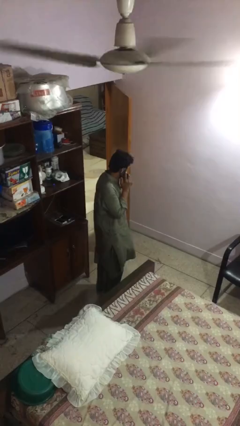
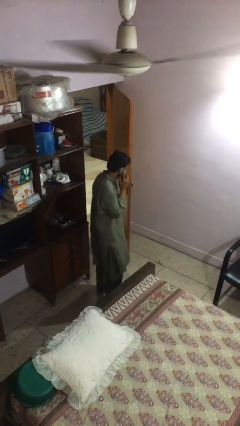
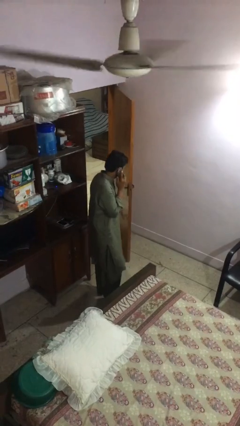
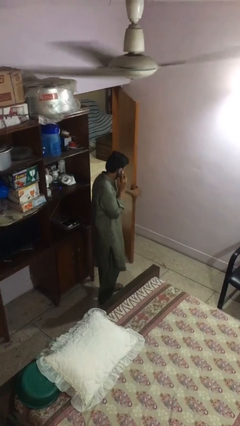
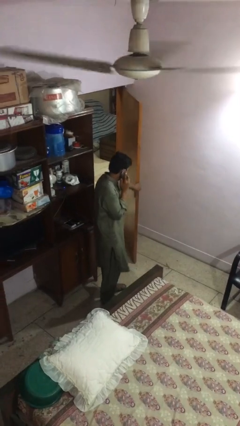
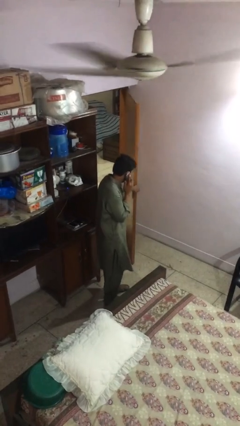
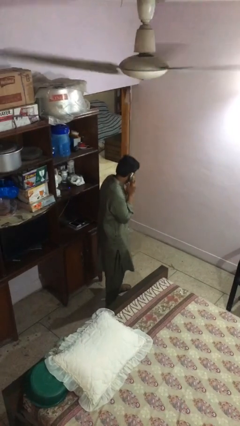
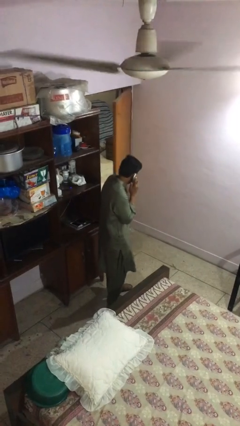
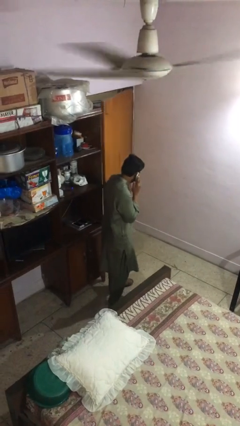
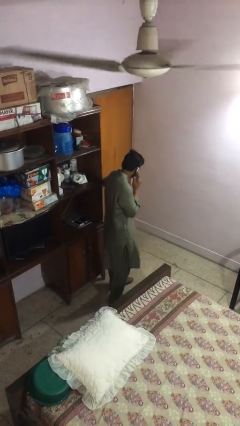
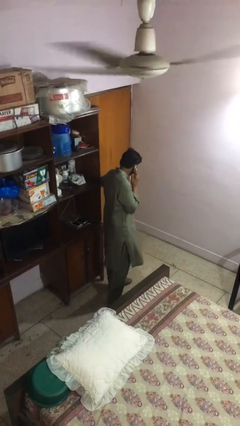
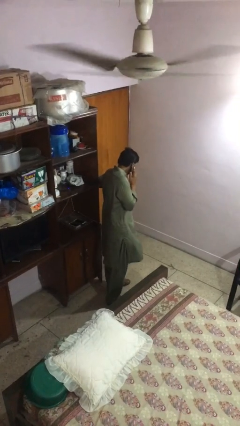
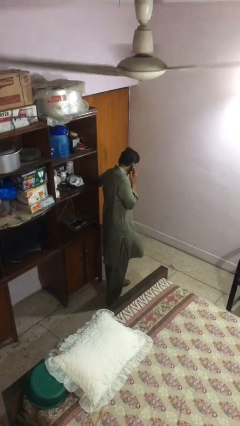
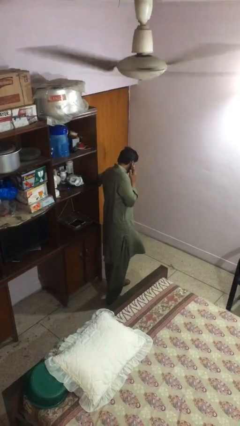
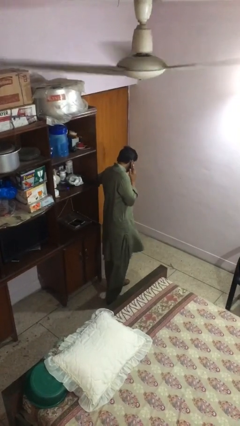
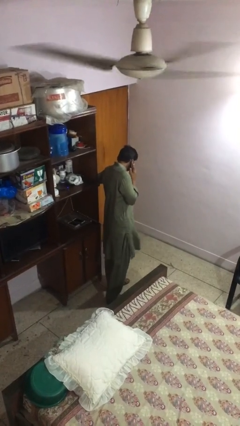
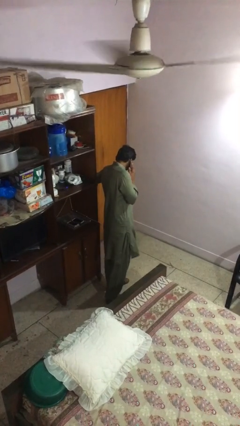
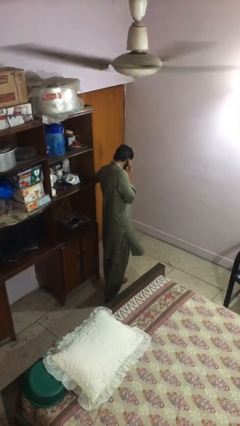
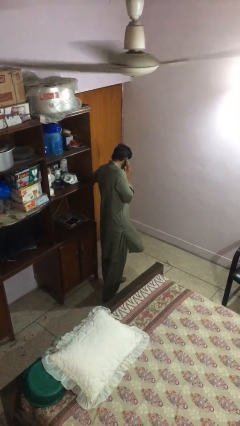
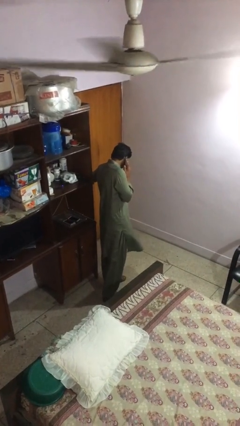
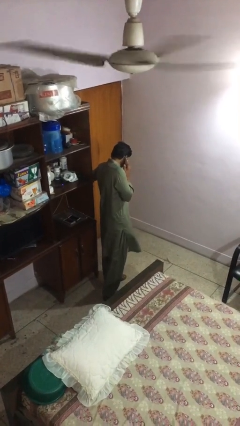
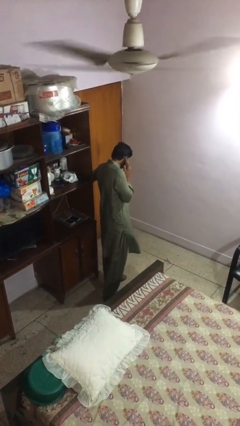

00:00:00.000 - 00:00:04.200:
person closes facility door

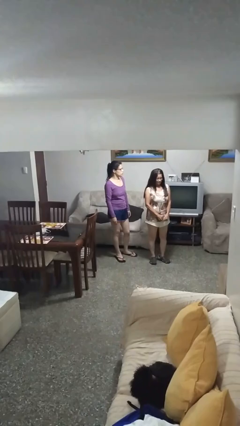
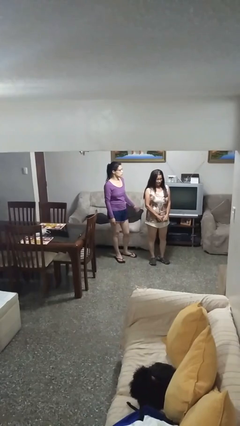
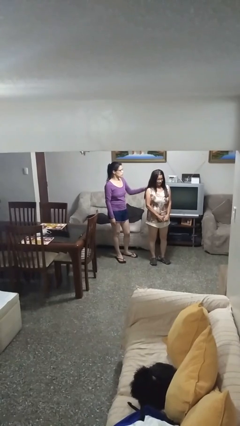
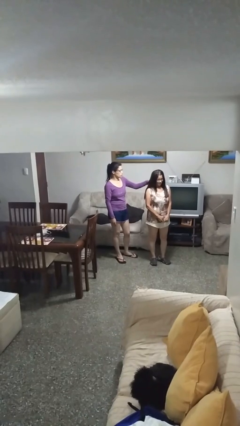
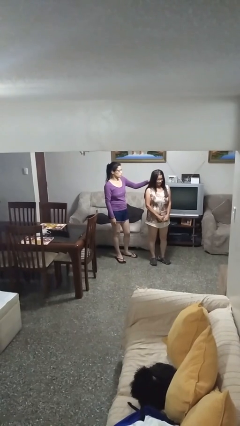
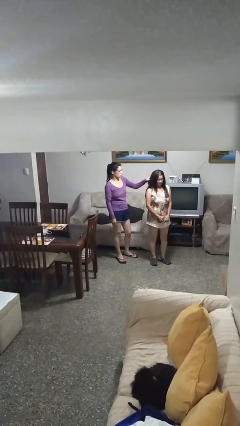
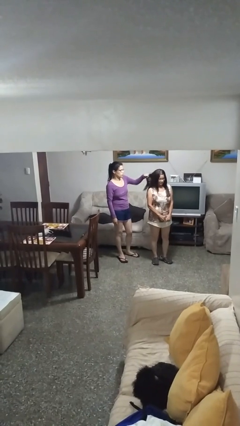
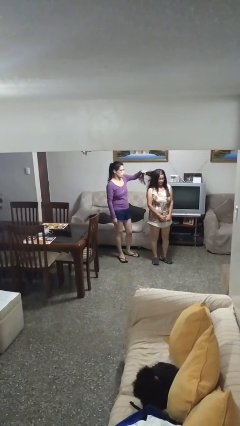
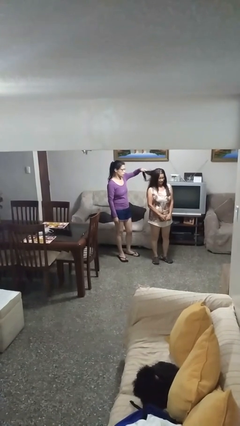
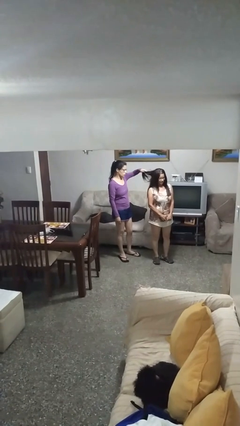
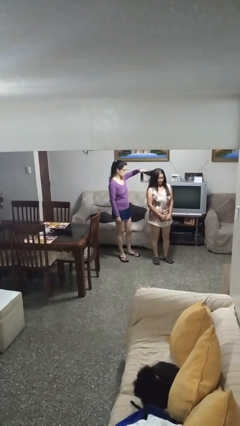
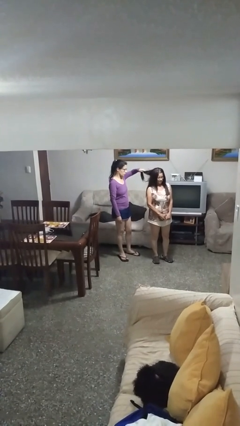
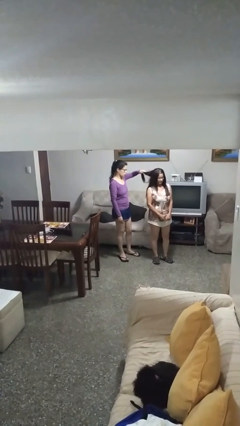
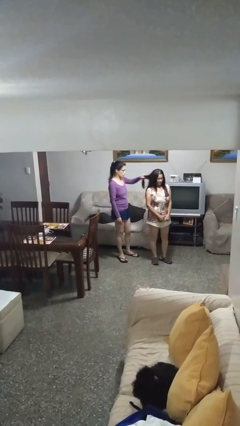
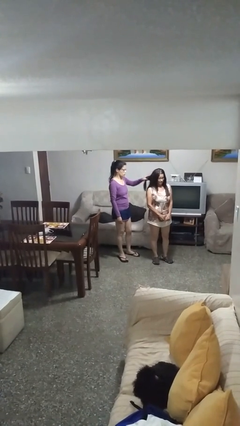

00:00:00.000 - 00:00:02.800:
person grabs person by hair

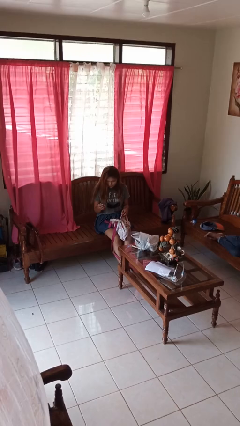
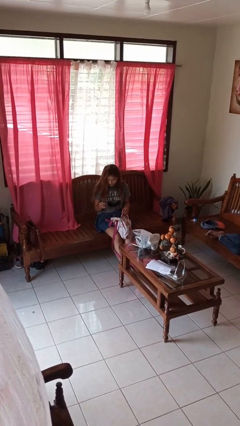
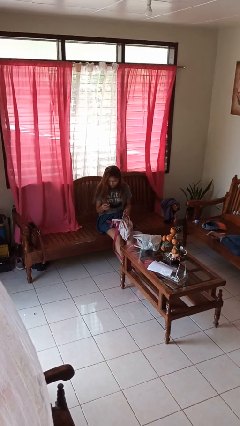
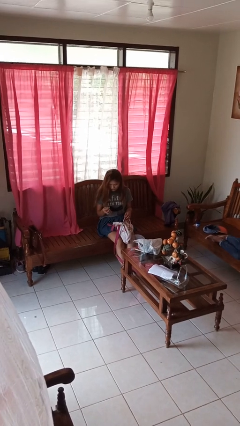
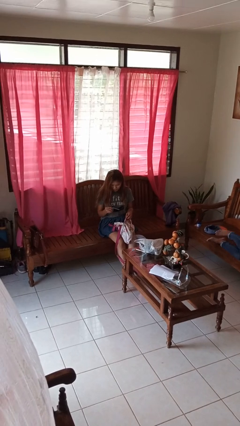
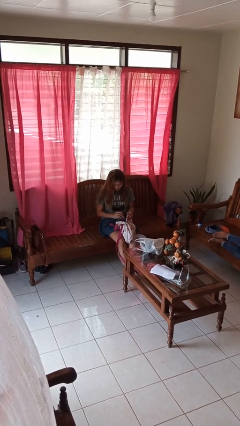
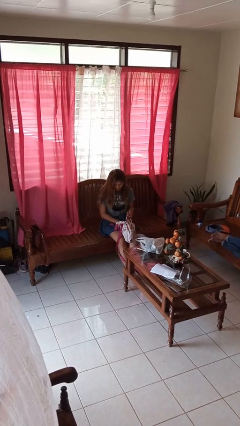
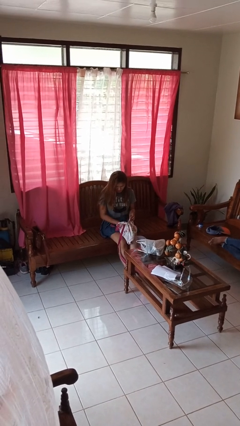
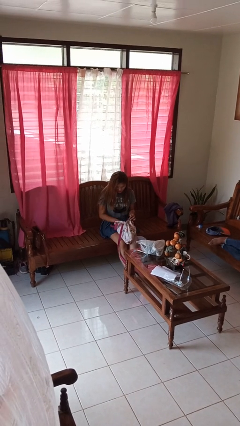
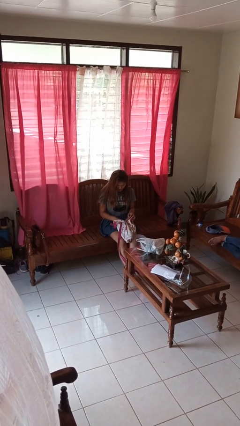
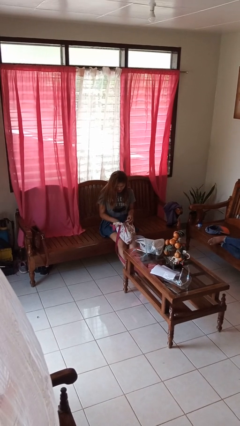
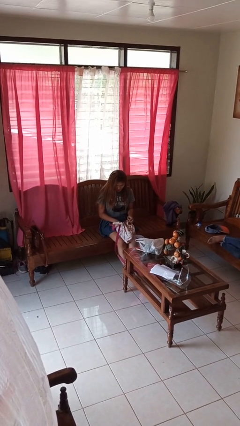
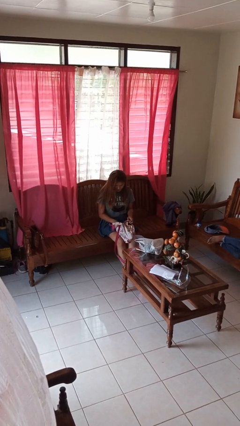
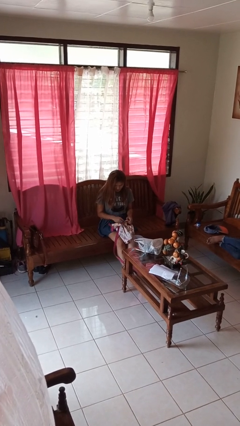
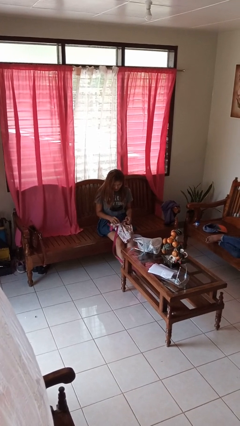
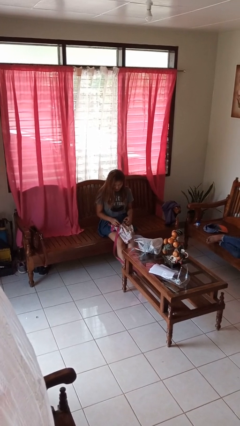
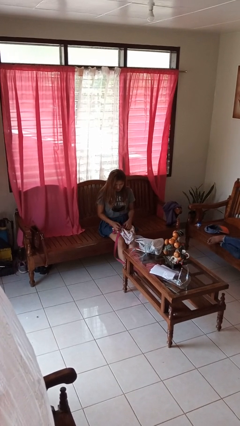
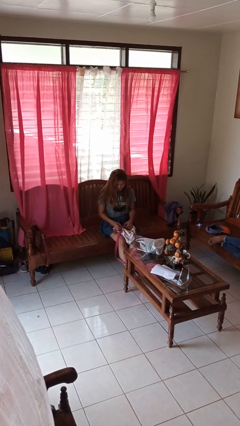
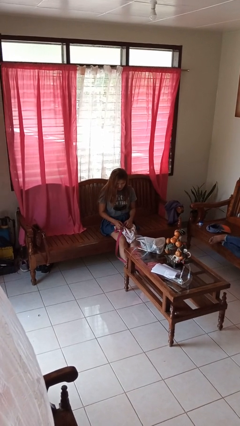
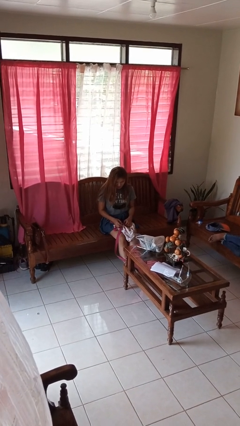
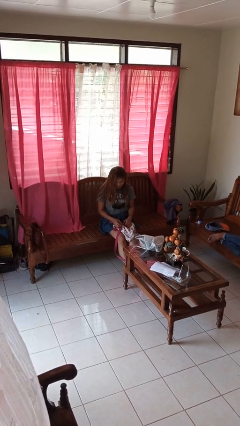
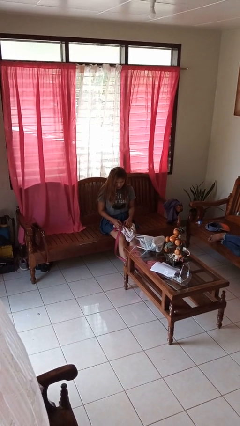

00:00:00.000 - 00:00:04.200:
person puts object into backpack

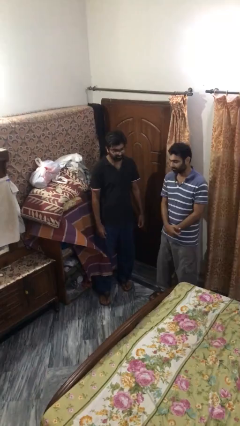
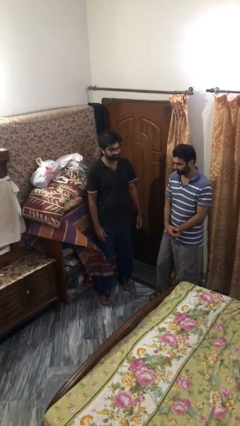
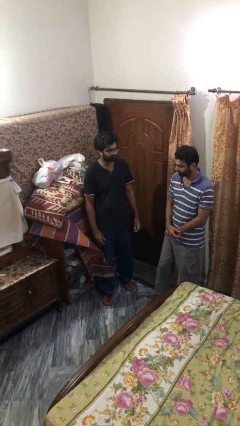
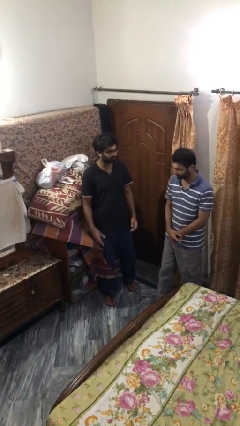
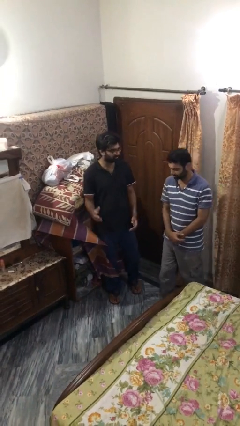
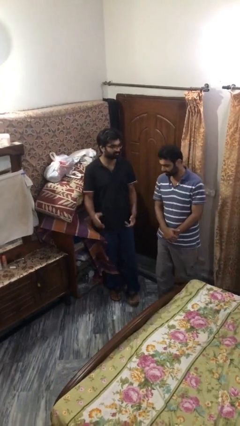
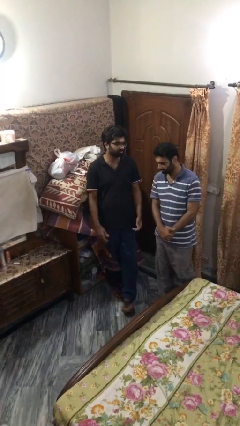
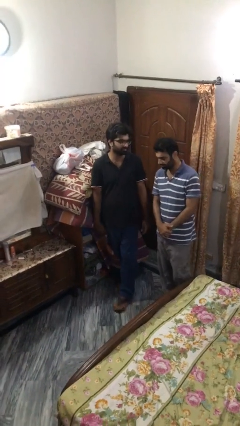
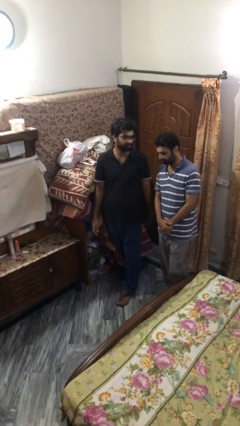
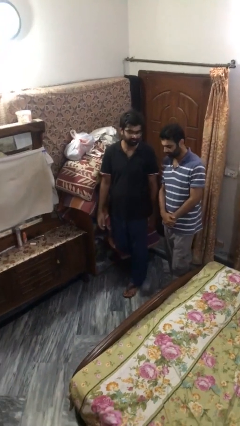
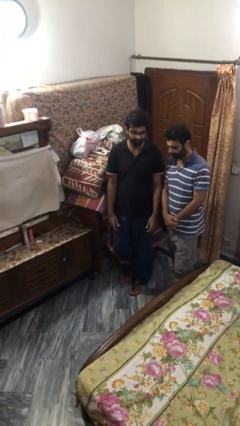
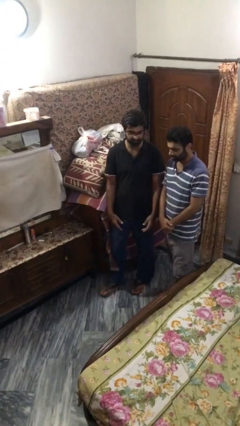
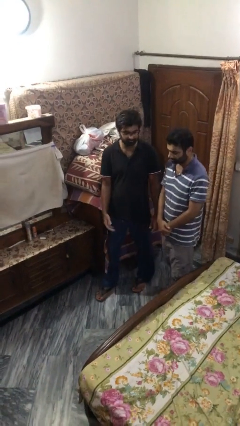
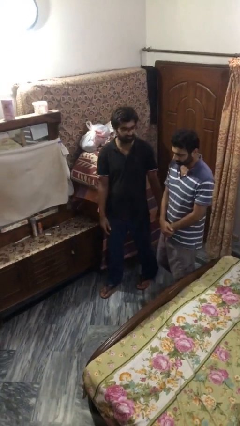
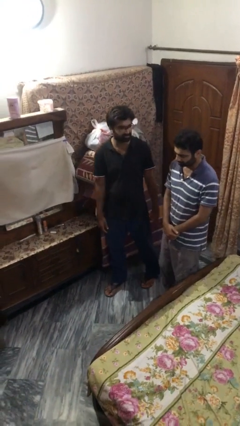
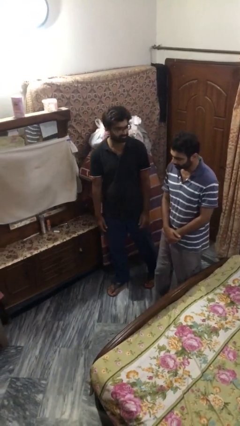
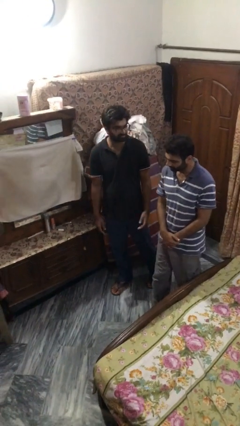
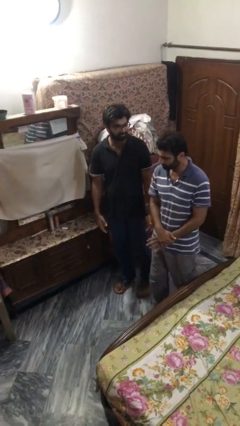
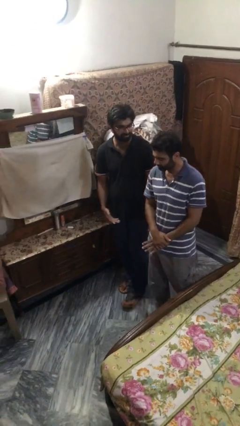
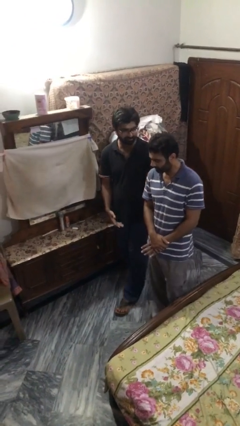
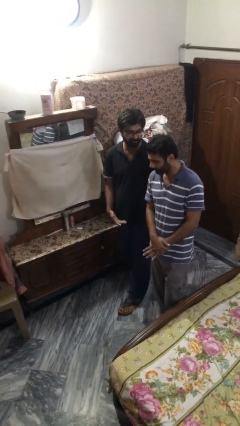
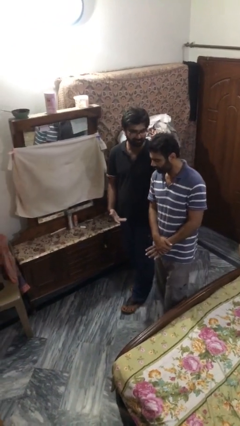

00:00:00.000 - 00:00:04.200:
person talks to person

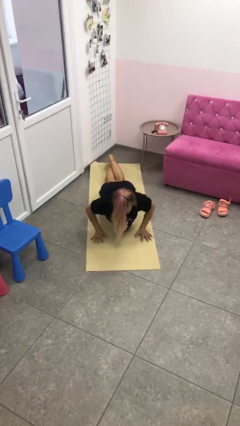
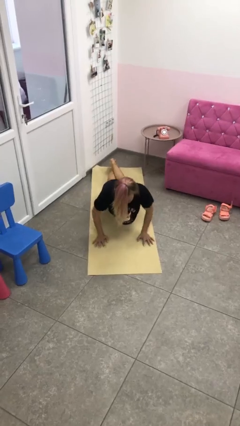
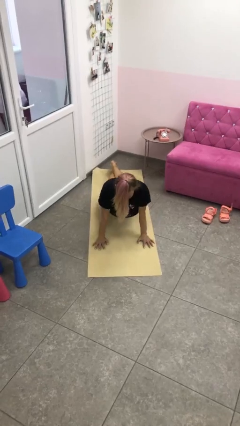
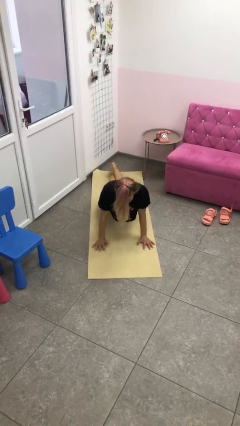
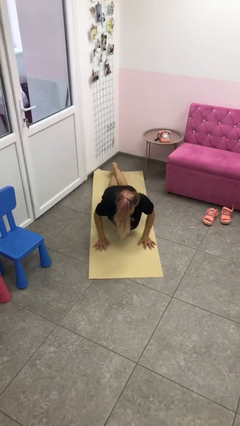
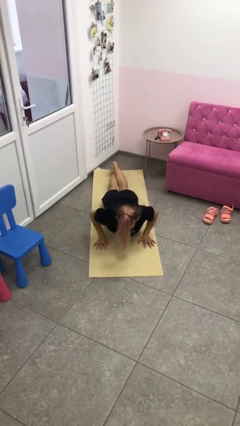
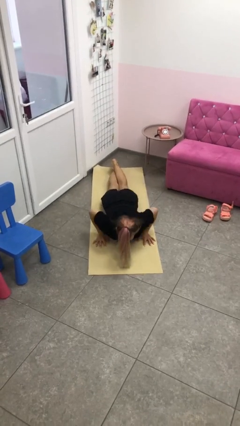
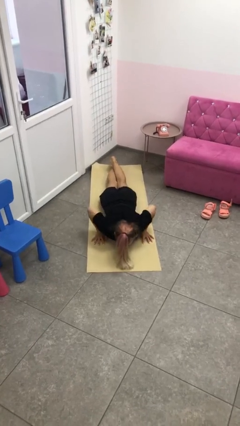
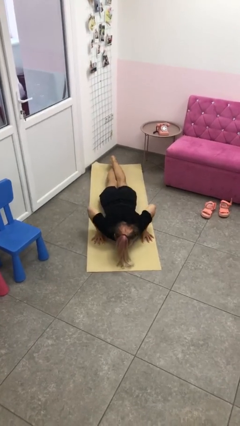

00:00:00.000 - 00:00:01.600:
person exercises with pushup

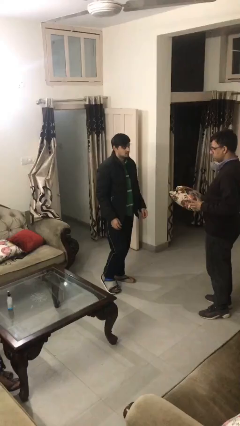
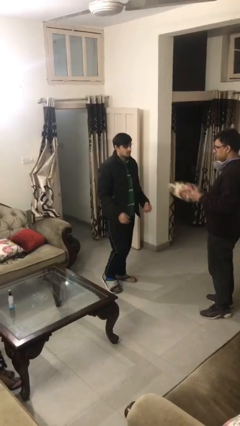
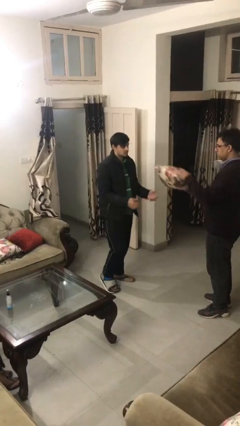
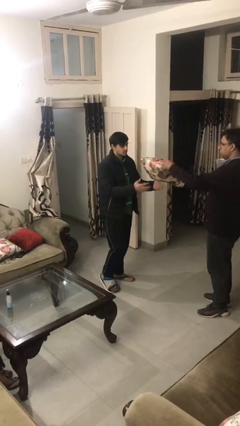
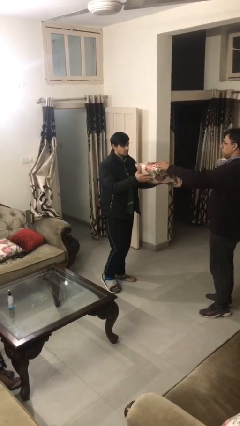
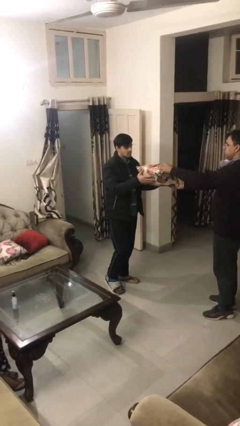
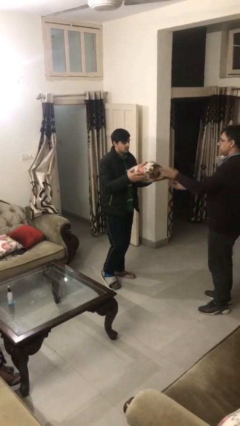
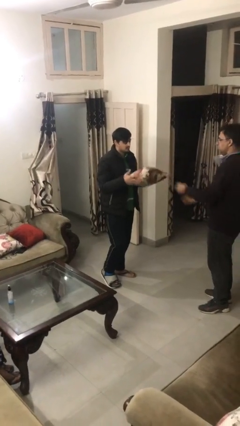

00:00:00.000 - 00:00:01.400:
person transfers object to person
